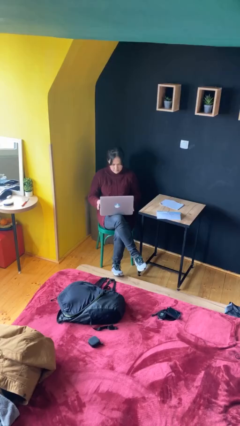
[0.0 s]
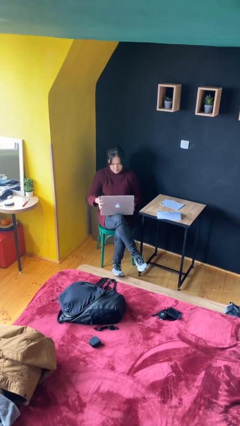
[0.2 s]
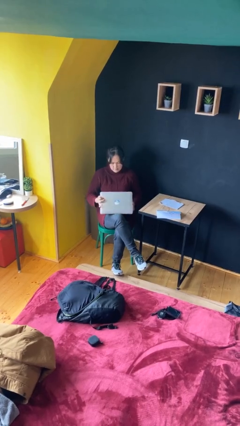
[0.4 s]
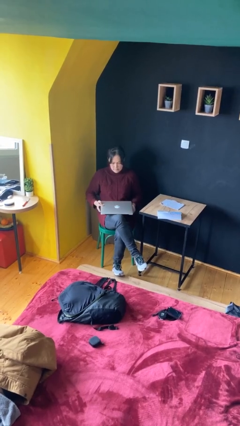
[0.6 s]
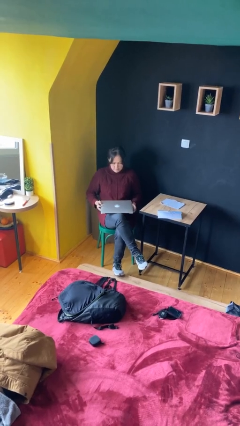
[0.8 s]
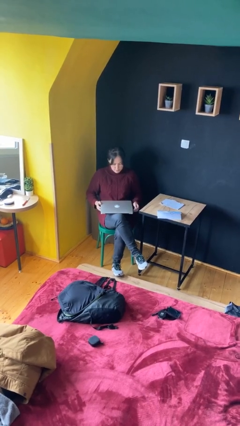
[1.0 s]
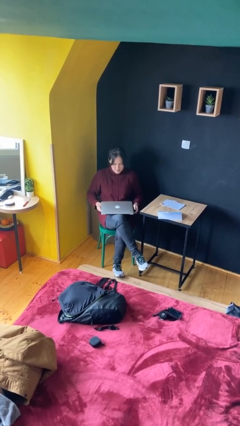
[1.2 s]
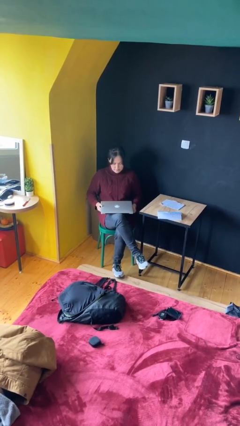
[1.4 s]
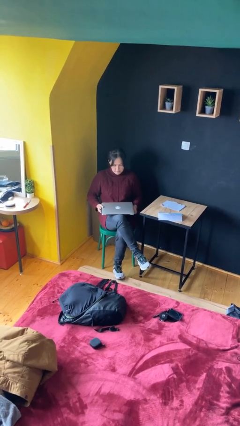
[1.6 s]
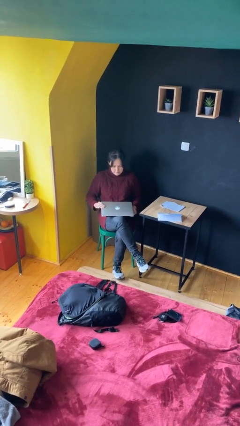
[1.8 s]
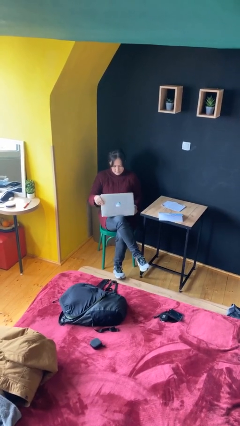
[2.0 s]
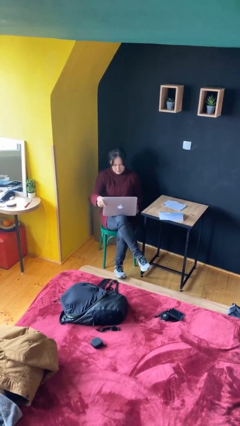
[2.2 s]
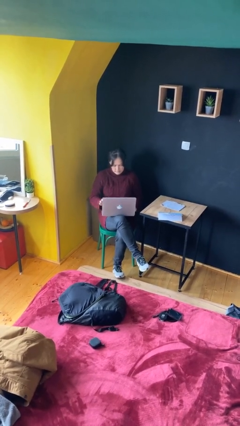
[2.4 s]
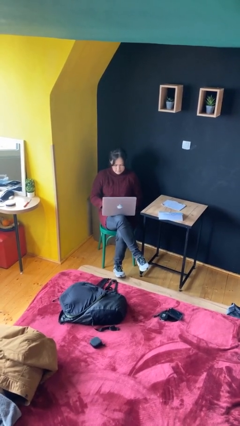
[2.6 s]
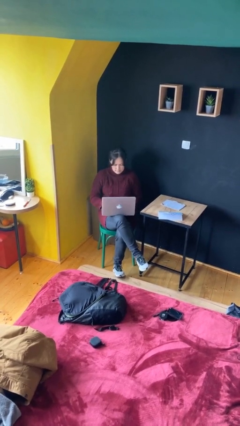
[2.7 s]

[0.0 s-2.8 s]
person interacts with laptop

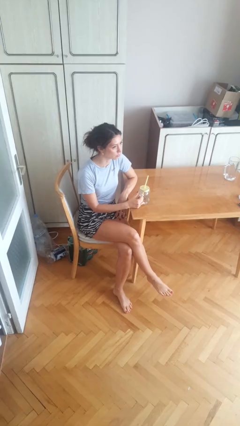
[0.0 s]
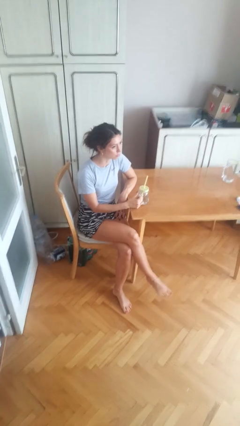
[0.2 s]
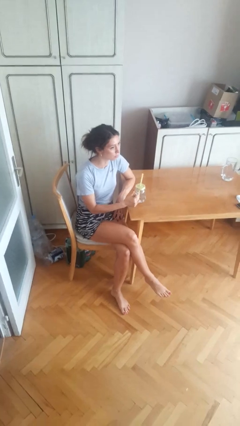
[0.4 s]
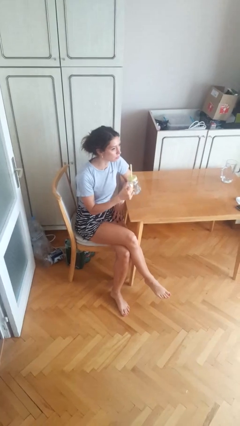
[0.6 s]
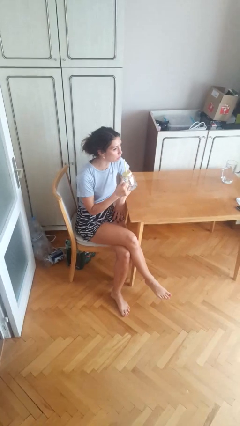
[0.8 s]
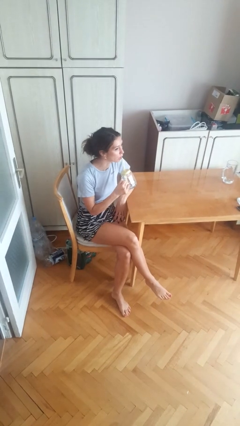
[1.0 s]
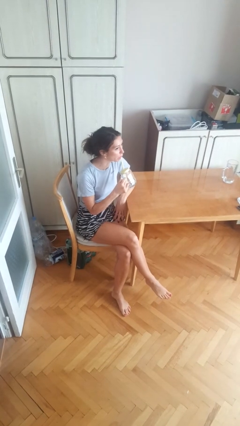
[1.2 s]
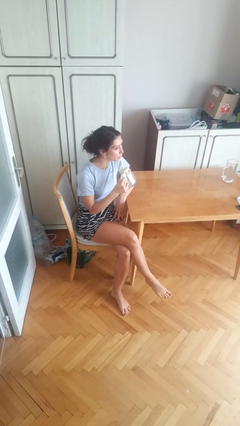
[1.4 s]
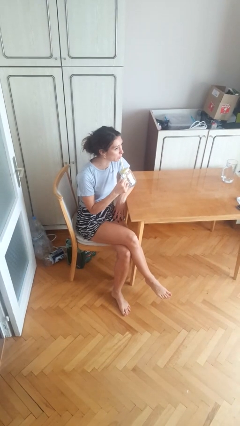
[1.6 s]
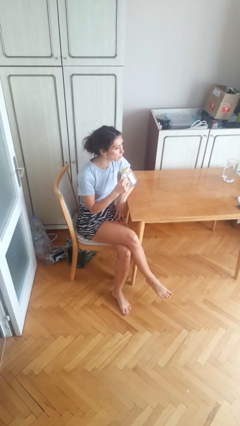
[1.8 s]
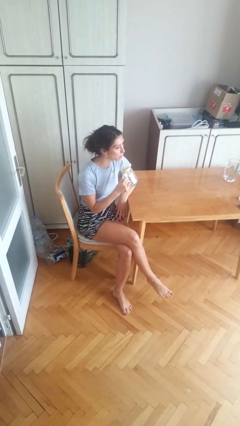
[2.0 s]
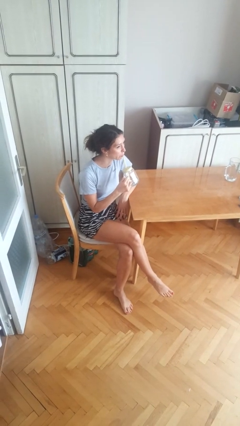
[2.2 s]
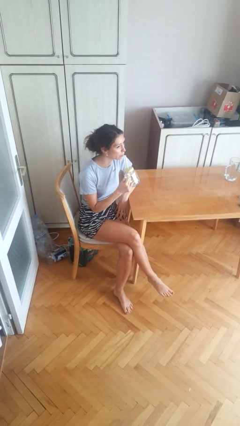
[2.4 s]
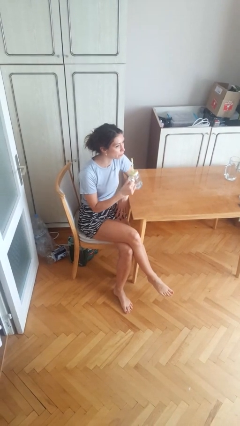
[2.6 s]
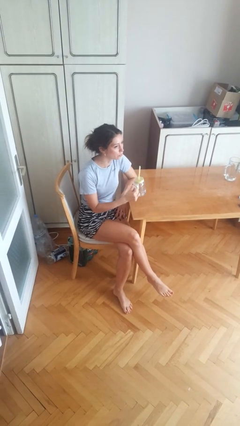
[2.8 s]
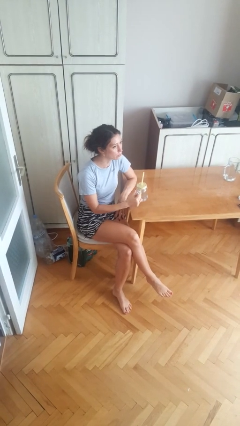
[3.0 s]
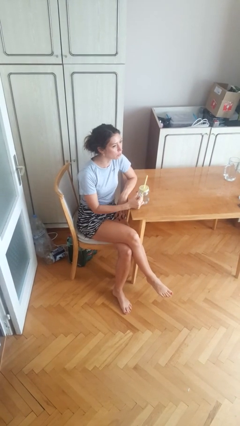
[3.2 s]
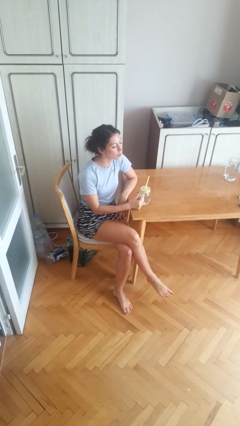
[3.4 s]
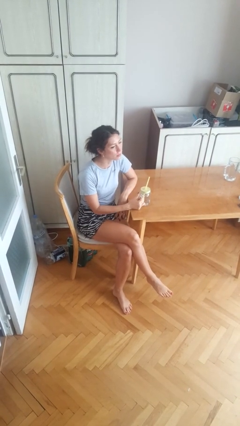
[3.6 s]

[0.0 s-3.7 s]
person drinks from straw

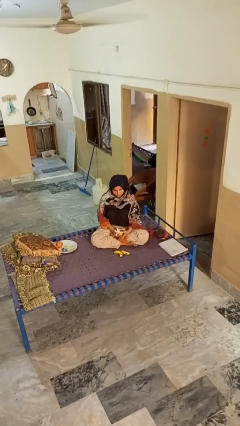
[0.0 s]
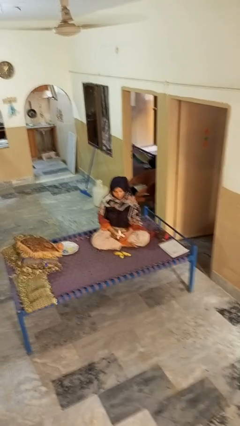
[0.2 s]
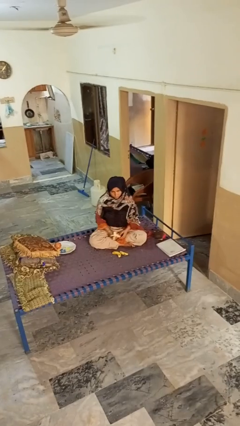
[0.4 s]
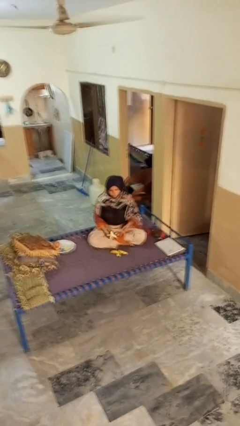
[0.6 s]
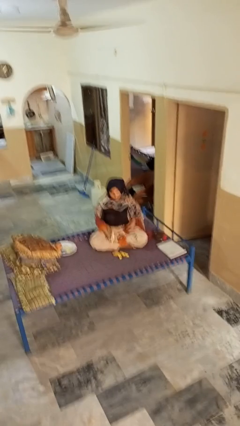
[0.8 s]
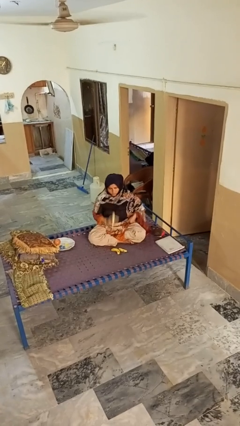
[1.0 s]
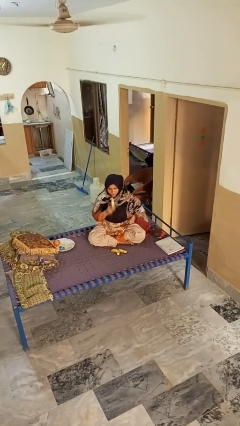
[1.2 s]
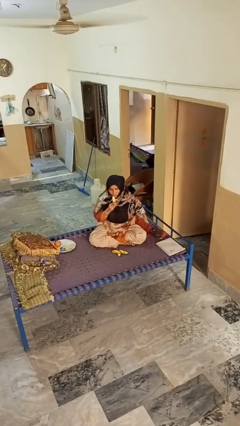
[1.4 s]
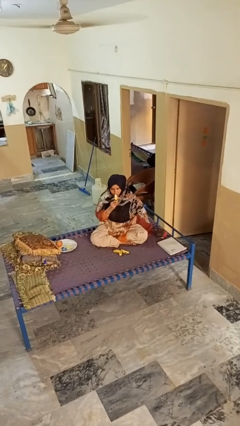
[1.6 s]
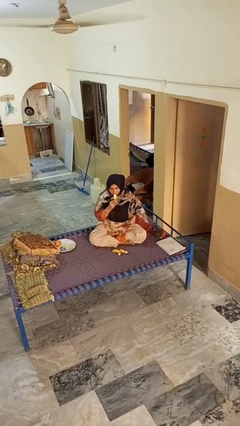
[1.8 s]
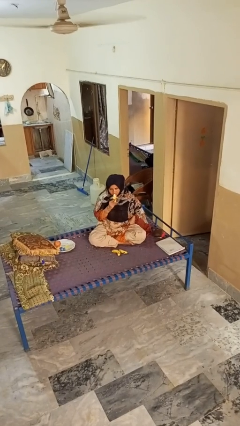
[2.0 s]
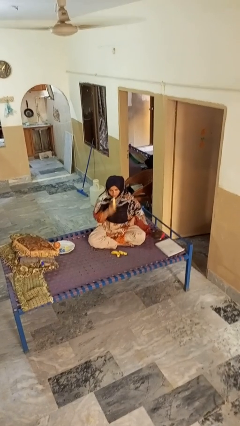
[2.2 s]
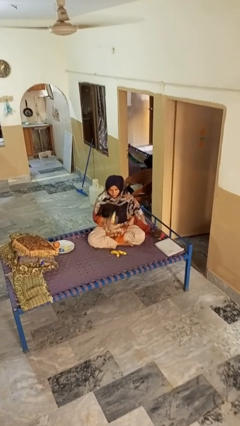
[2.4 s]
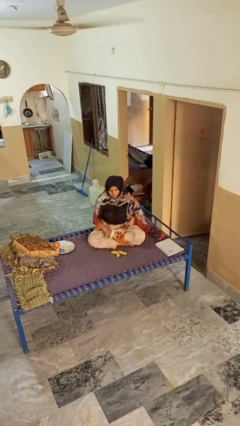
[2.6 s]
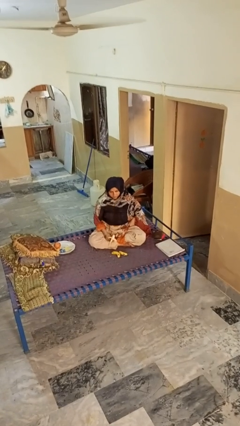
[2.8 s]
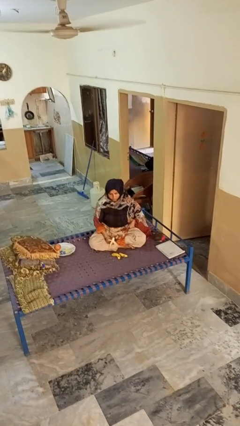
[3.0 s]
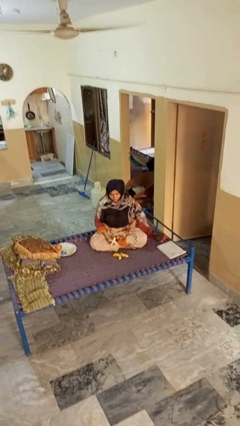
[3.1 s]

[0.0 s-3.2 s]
person eats banana

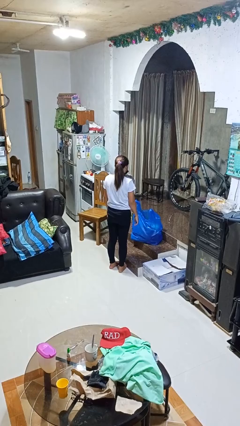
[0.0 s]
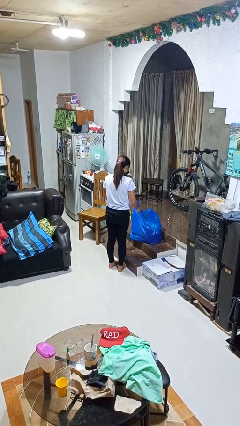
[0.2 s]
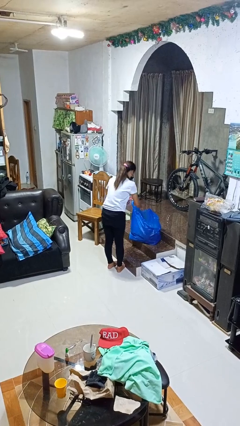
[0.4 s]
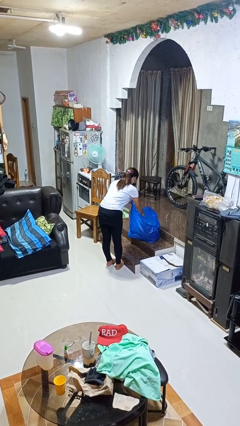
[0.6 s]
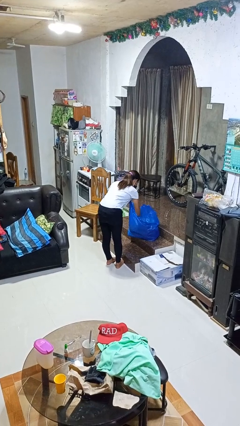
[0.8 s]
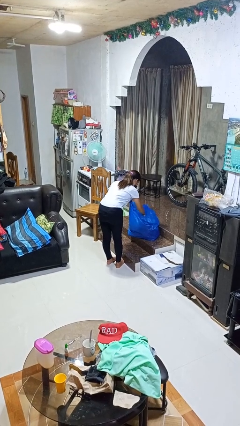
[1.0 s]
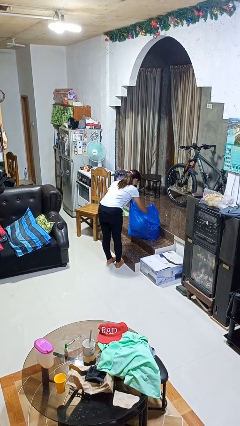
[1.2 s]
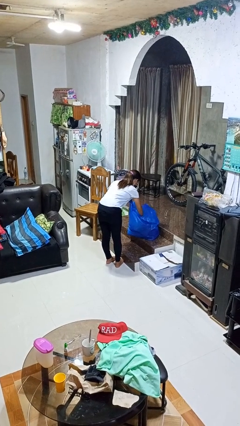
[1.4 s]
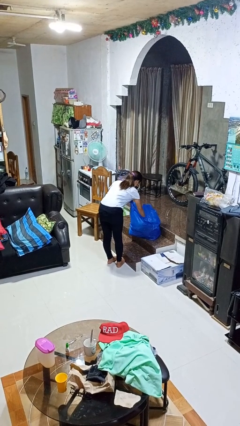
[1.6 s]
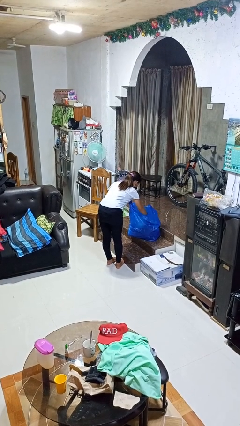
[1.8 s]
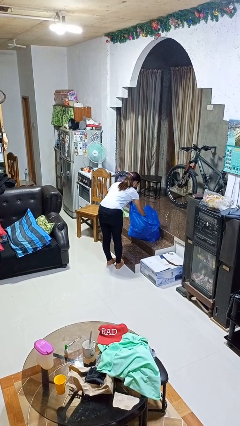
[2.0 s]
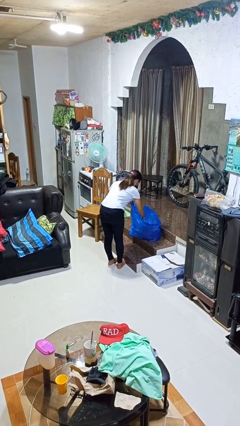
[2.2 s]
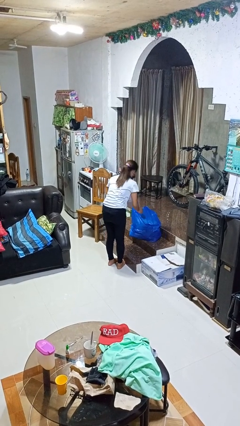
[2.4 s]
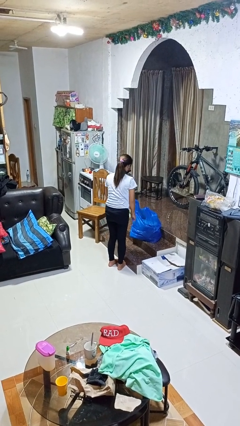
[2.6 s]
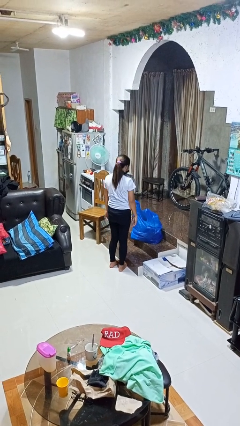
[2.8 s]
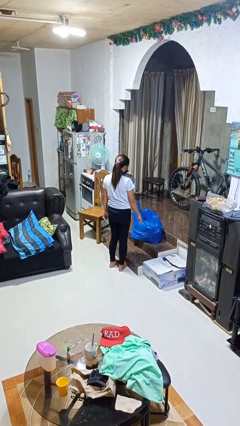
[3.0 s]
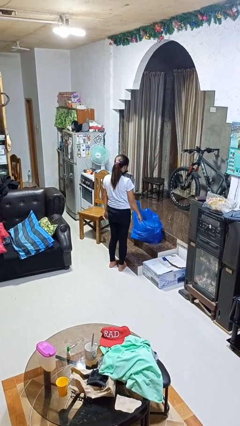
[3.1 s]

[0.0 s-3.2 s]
person searches in bag

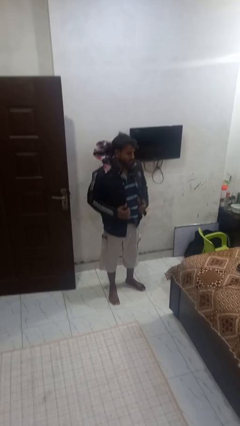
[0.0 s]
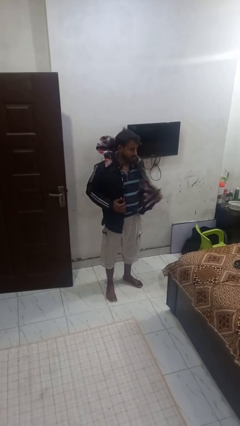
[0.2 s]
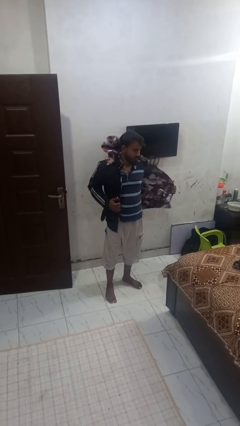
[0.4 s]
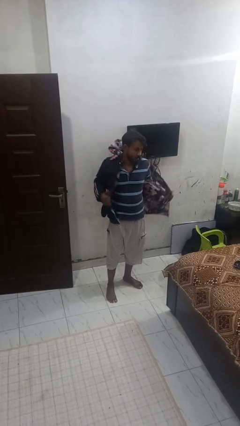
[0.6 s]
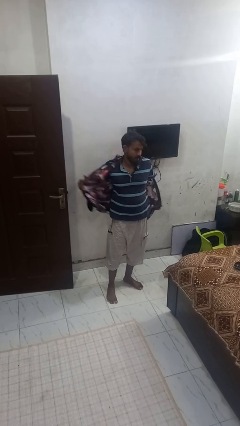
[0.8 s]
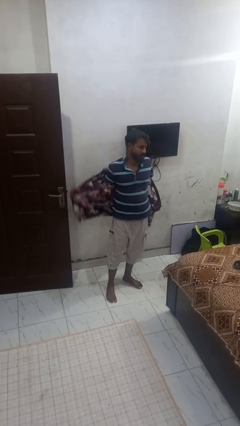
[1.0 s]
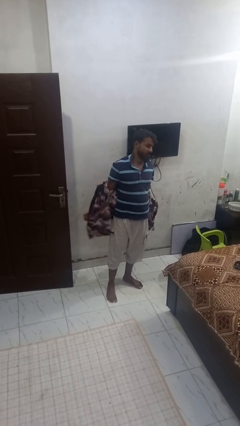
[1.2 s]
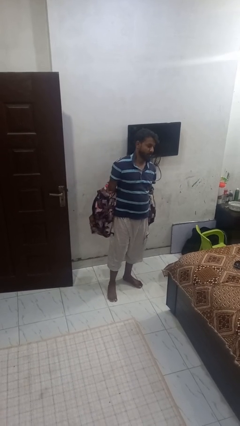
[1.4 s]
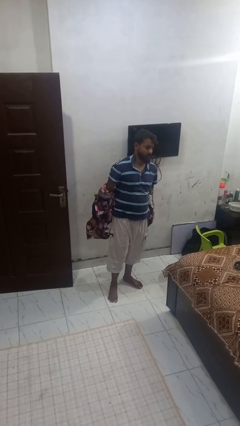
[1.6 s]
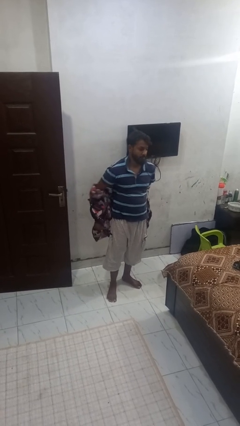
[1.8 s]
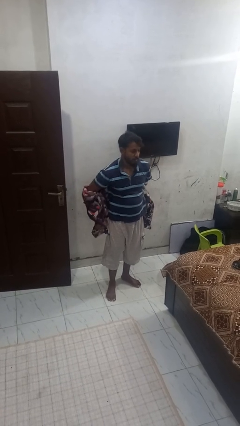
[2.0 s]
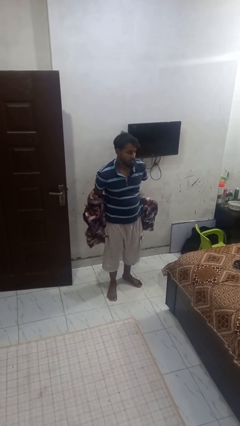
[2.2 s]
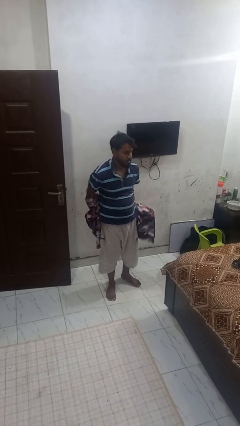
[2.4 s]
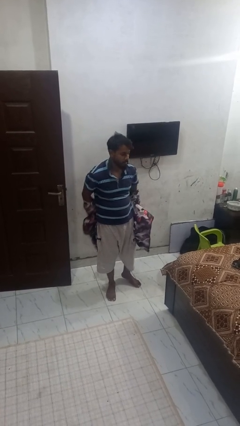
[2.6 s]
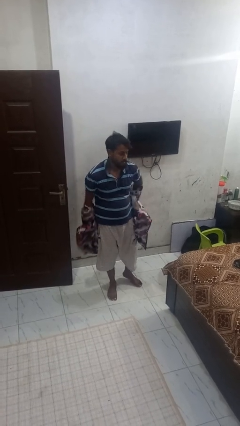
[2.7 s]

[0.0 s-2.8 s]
person takes off jacket

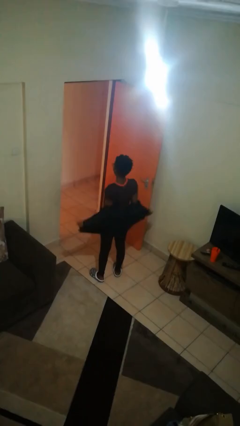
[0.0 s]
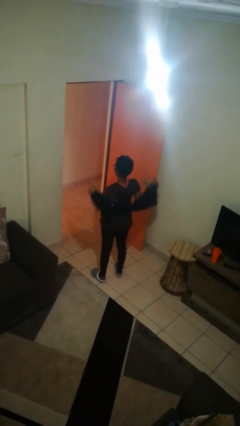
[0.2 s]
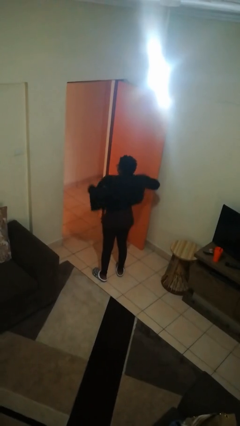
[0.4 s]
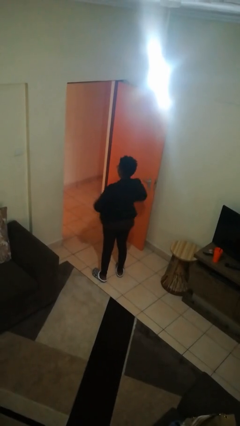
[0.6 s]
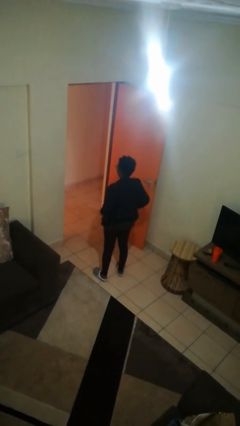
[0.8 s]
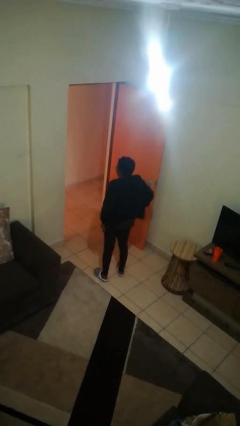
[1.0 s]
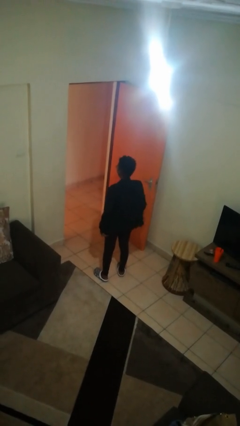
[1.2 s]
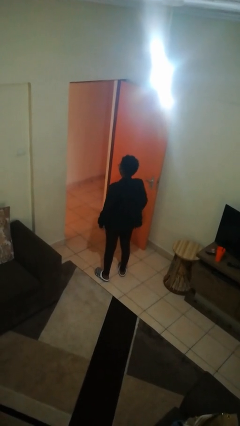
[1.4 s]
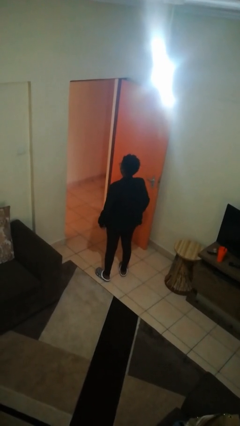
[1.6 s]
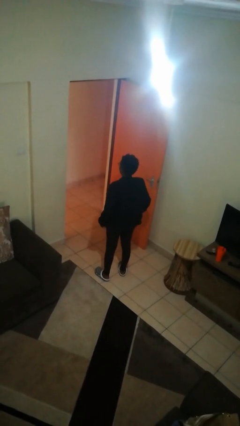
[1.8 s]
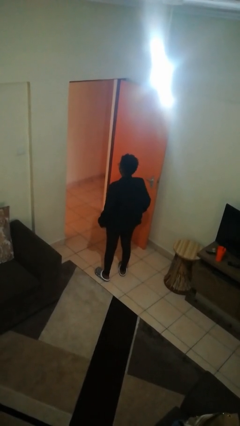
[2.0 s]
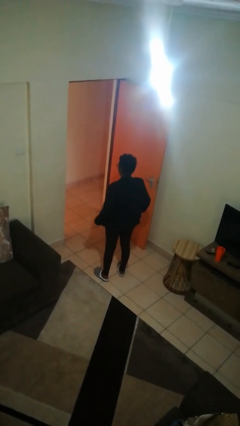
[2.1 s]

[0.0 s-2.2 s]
person puts on jacket
